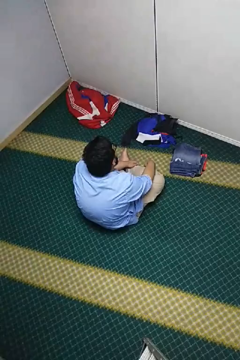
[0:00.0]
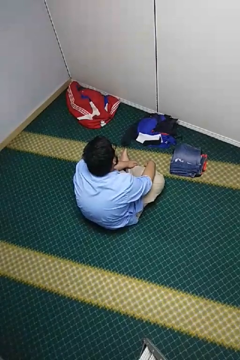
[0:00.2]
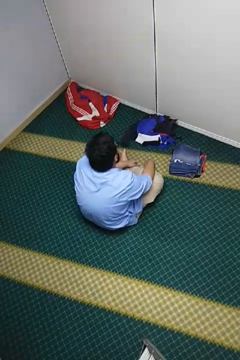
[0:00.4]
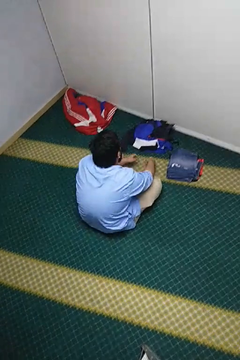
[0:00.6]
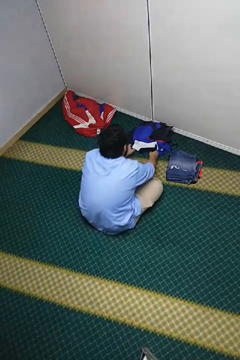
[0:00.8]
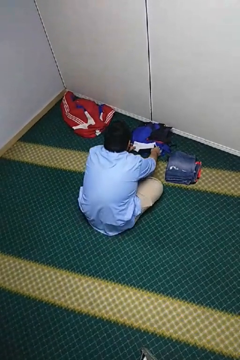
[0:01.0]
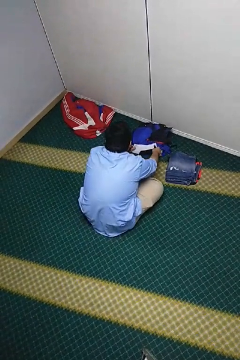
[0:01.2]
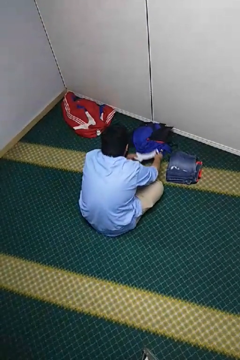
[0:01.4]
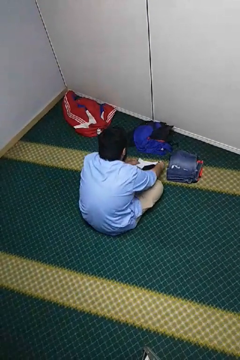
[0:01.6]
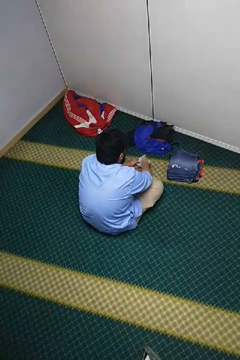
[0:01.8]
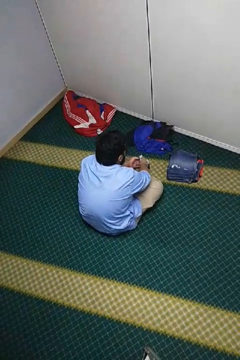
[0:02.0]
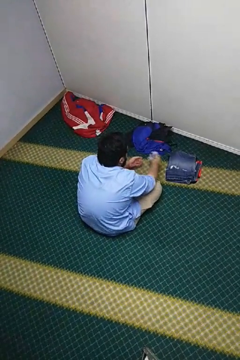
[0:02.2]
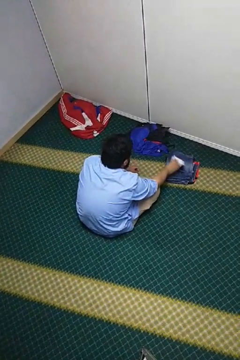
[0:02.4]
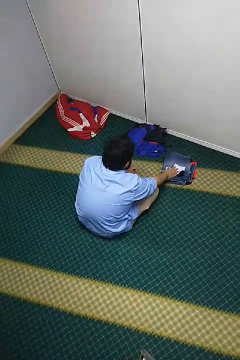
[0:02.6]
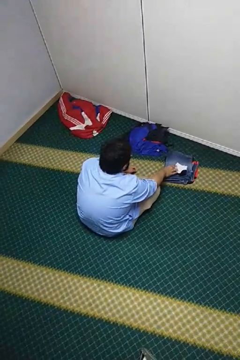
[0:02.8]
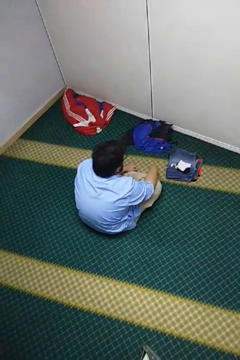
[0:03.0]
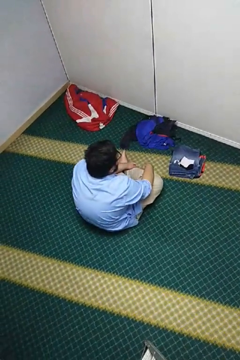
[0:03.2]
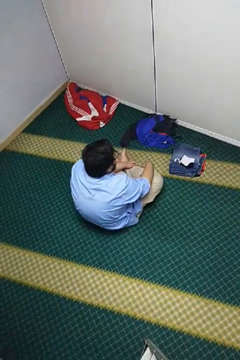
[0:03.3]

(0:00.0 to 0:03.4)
person folds socks

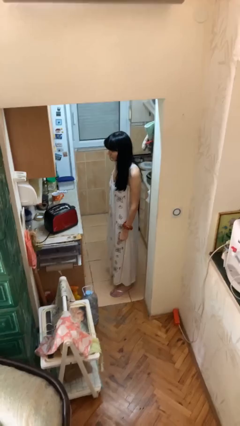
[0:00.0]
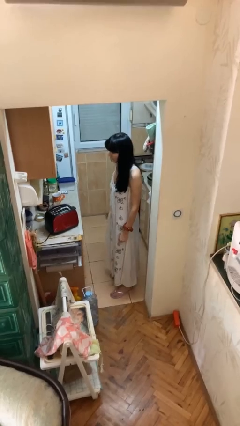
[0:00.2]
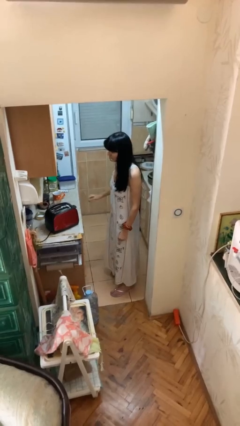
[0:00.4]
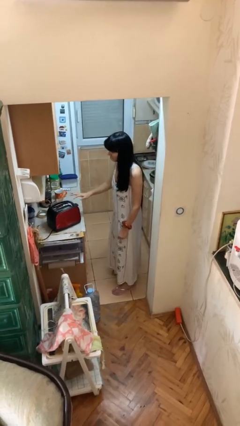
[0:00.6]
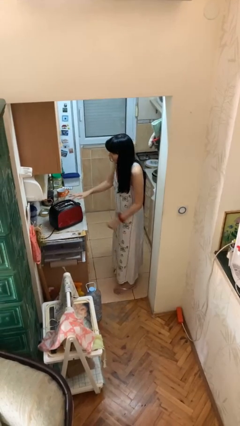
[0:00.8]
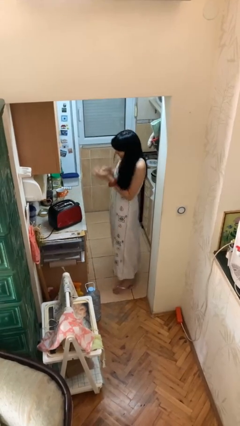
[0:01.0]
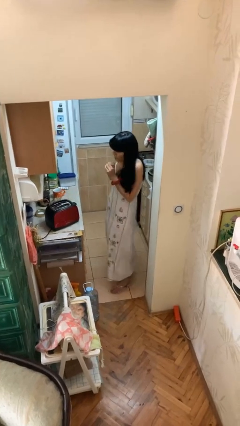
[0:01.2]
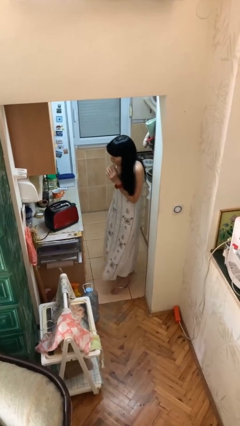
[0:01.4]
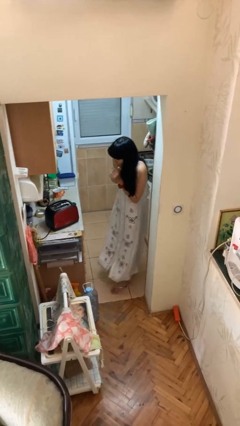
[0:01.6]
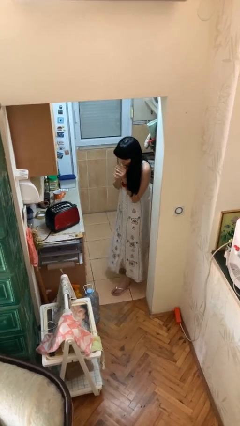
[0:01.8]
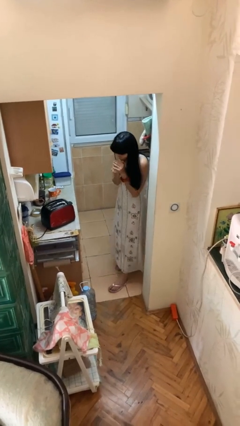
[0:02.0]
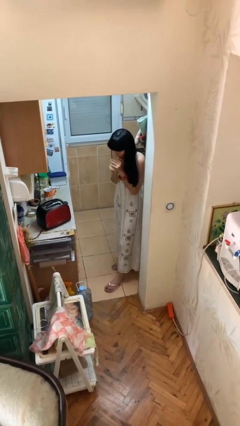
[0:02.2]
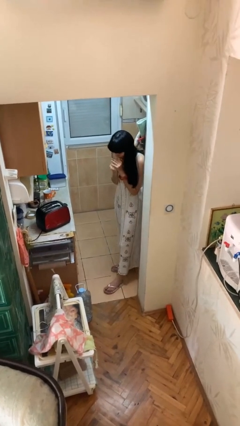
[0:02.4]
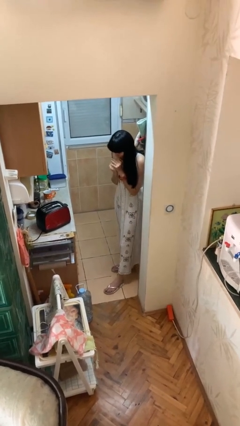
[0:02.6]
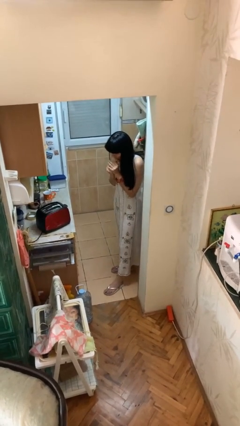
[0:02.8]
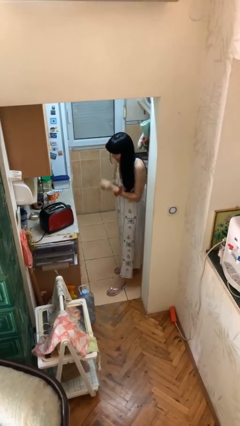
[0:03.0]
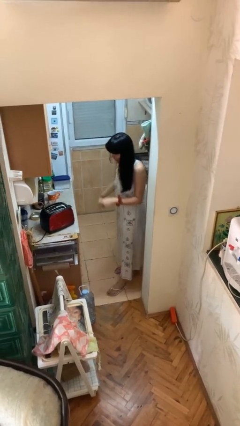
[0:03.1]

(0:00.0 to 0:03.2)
person burns hand

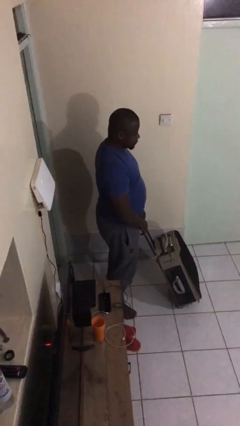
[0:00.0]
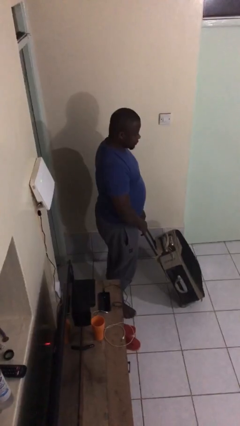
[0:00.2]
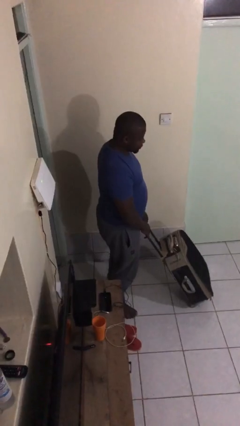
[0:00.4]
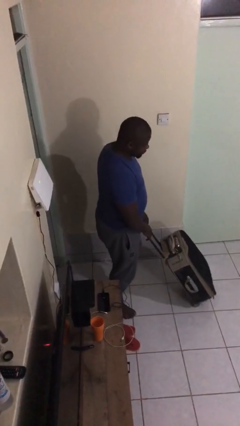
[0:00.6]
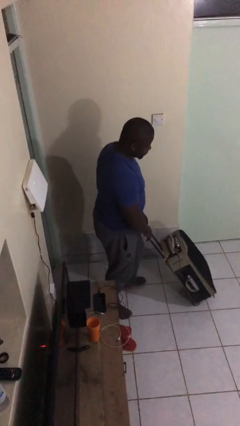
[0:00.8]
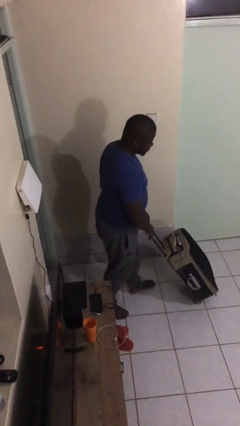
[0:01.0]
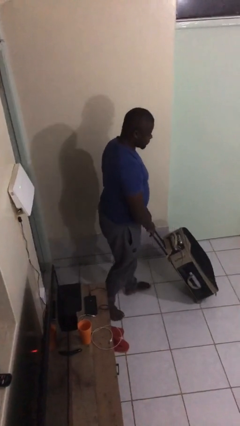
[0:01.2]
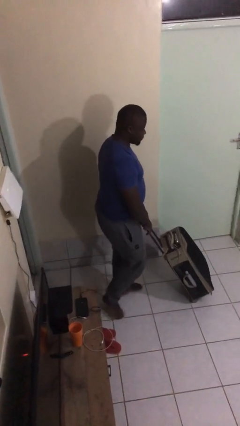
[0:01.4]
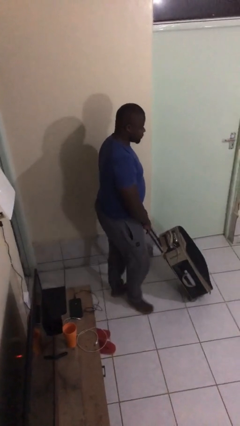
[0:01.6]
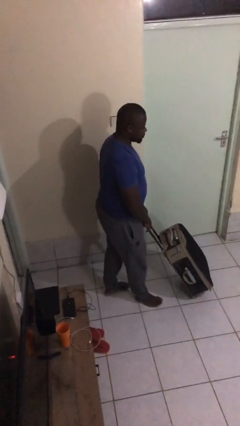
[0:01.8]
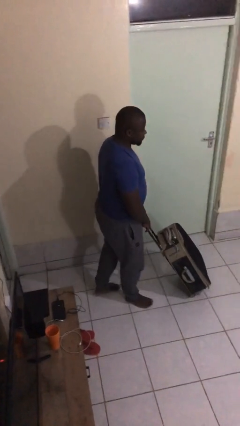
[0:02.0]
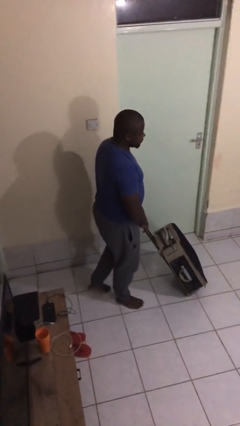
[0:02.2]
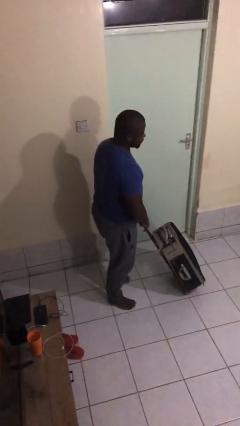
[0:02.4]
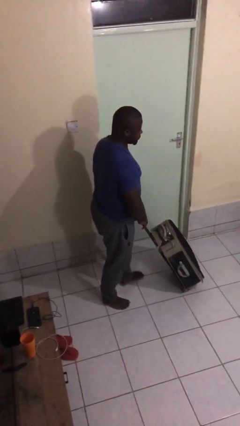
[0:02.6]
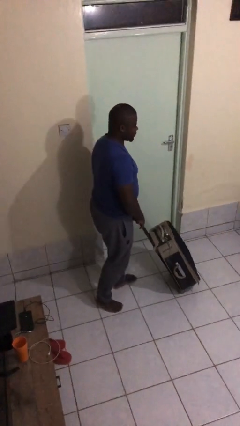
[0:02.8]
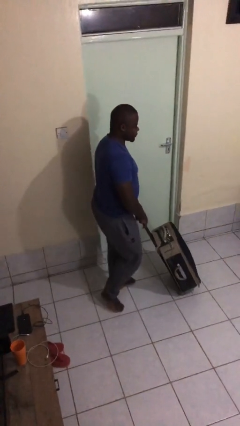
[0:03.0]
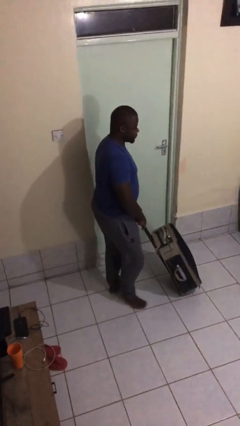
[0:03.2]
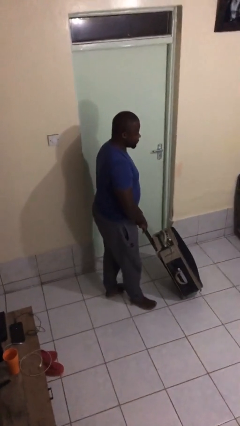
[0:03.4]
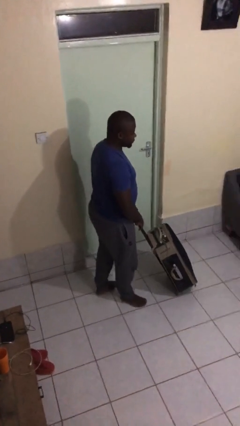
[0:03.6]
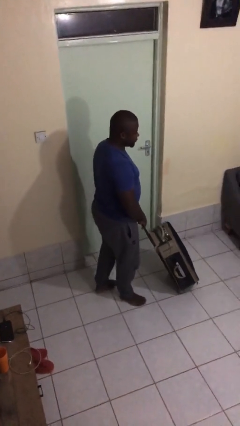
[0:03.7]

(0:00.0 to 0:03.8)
person pushes wheeled cart

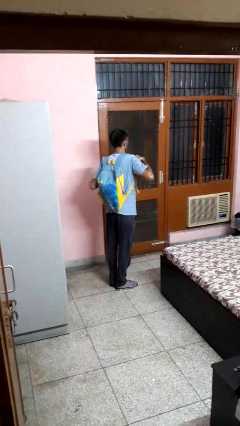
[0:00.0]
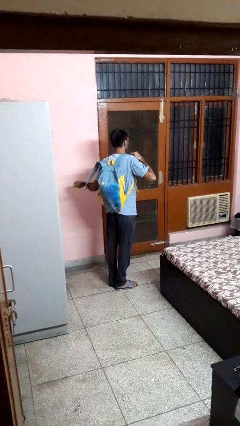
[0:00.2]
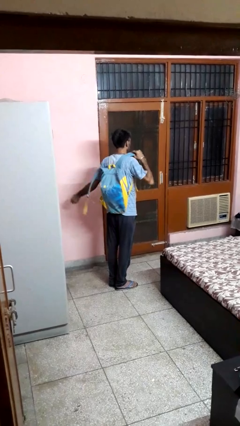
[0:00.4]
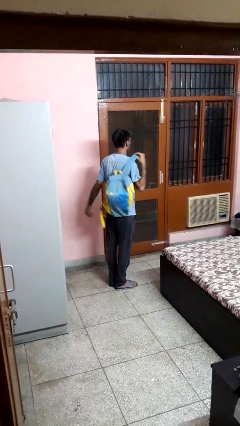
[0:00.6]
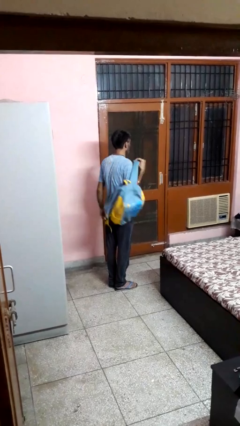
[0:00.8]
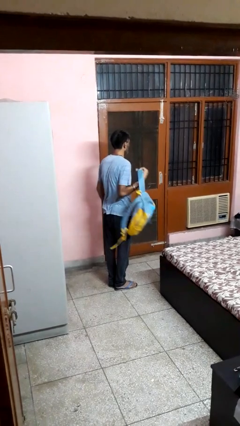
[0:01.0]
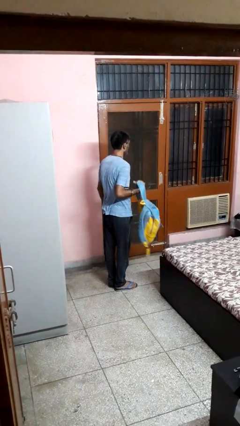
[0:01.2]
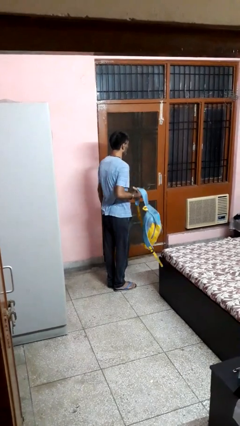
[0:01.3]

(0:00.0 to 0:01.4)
person takes off backpack

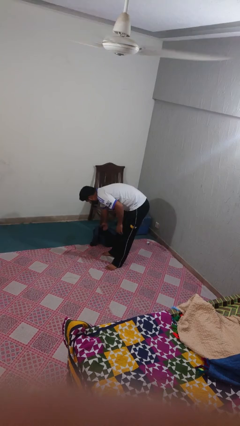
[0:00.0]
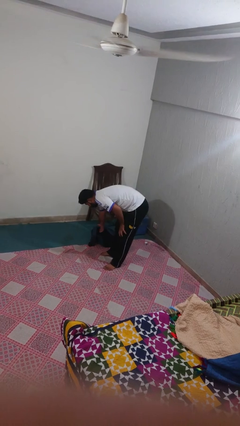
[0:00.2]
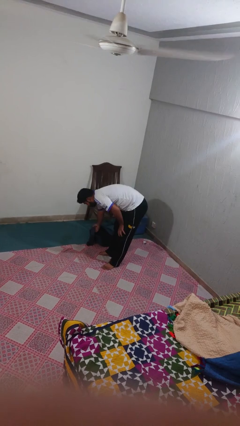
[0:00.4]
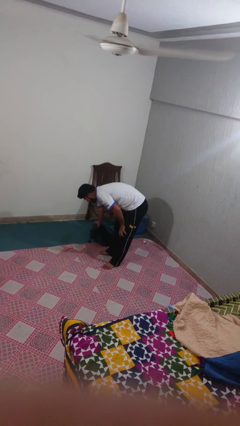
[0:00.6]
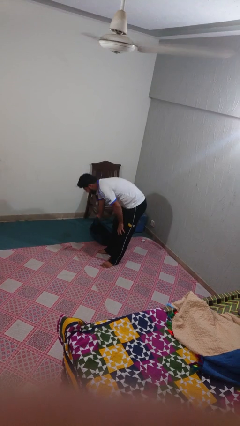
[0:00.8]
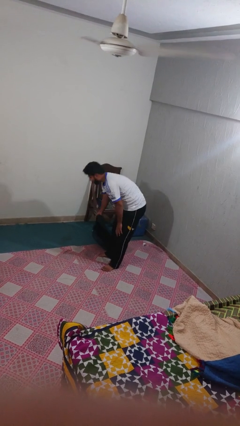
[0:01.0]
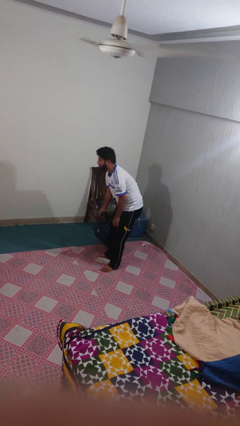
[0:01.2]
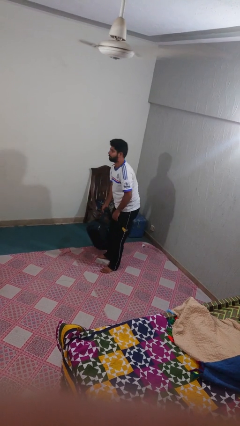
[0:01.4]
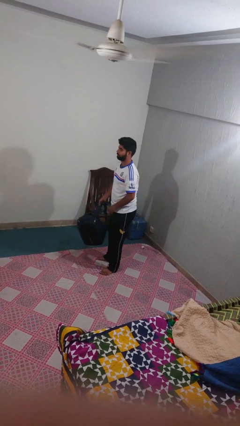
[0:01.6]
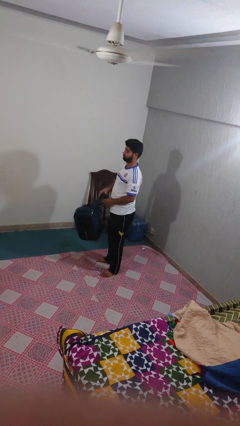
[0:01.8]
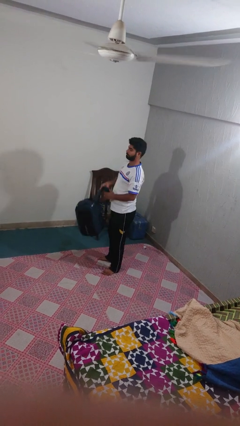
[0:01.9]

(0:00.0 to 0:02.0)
person picks up object from floor

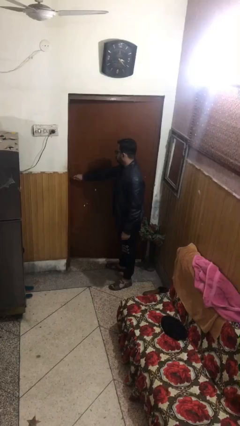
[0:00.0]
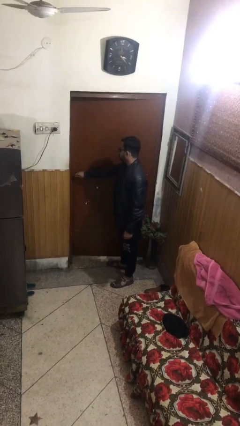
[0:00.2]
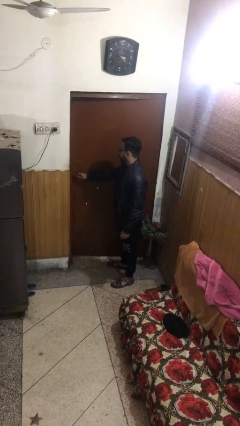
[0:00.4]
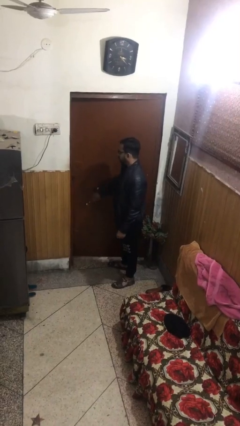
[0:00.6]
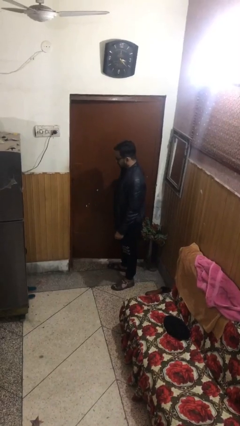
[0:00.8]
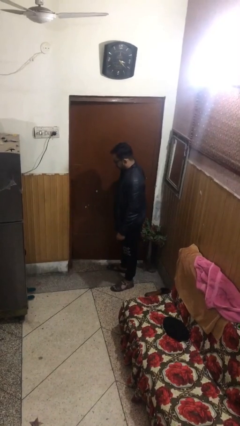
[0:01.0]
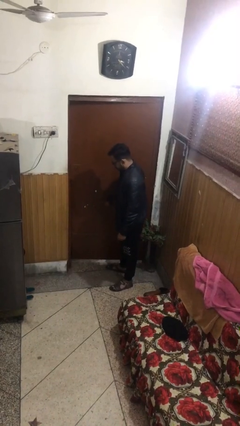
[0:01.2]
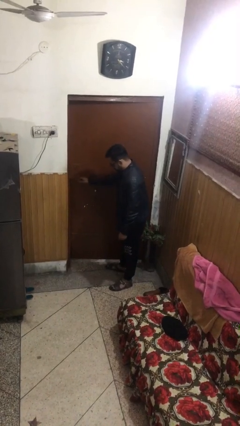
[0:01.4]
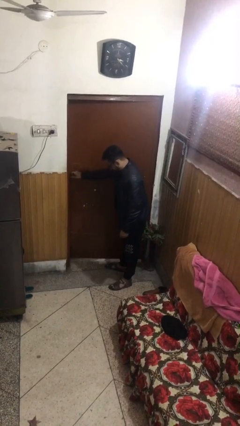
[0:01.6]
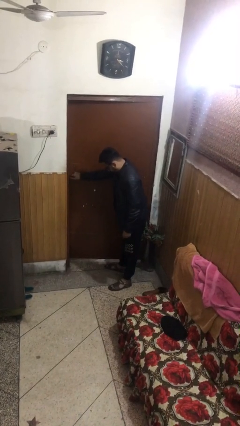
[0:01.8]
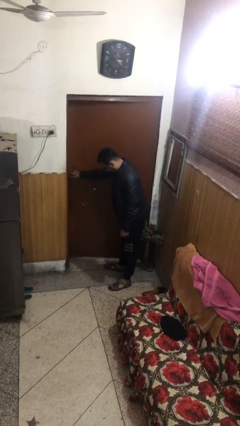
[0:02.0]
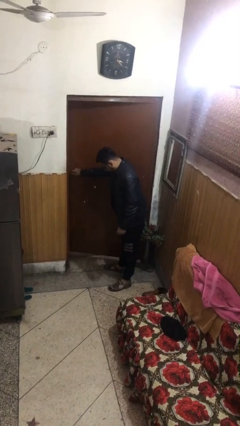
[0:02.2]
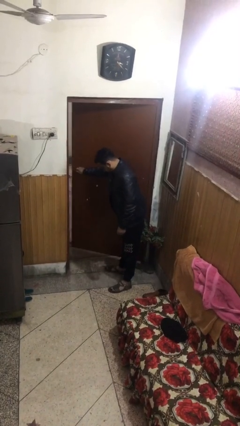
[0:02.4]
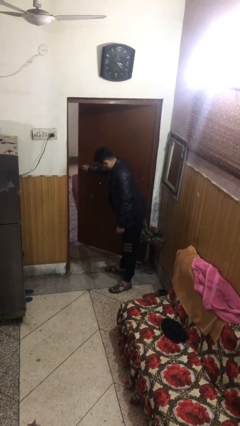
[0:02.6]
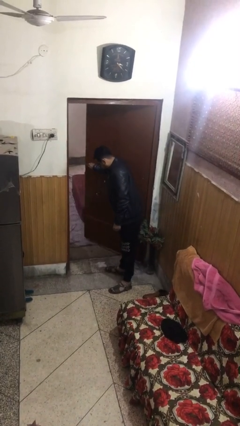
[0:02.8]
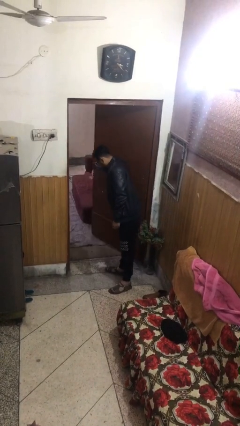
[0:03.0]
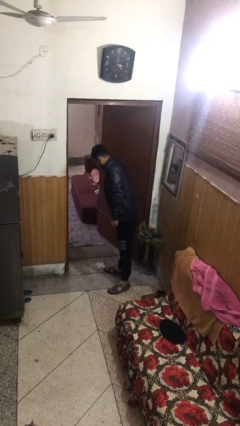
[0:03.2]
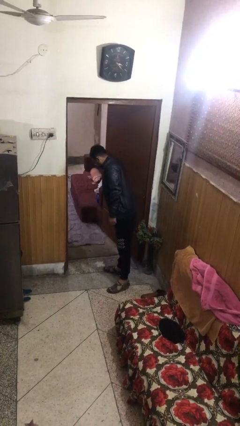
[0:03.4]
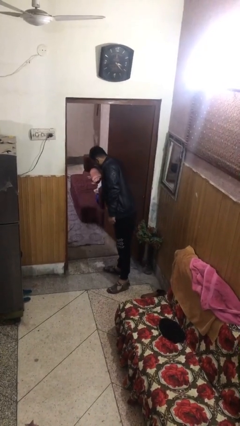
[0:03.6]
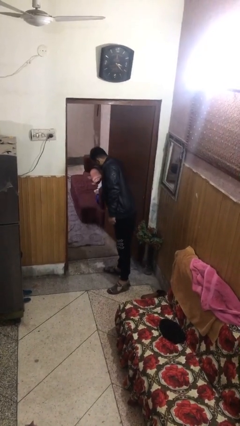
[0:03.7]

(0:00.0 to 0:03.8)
person opens facility door

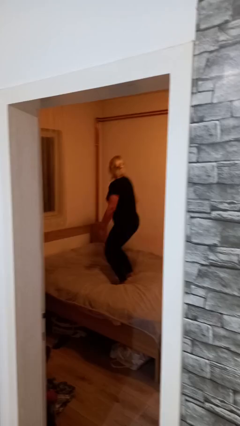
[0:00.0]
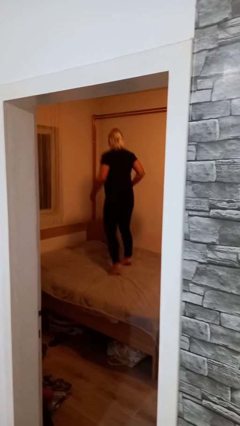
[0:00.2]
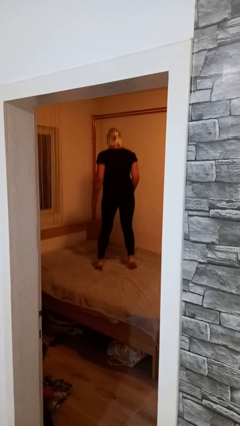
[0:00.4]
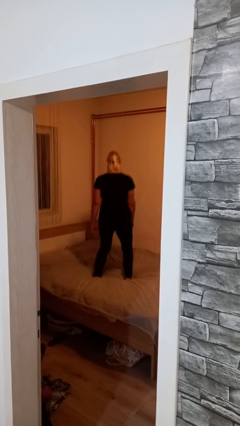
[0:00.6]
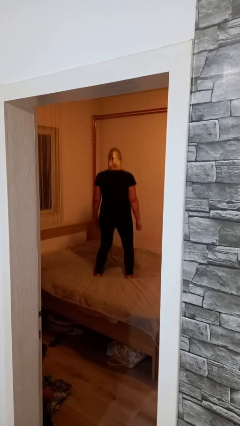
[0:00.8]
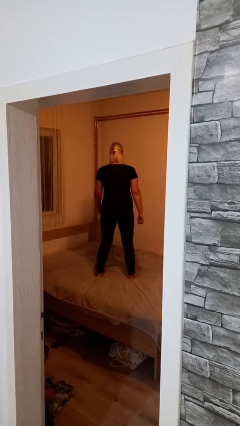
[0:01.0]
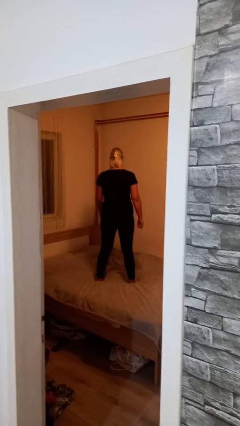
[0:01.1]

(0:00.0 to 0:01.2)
person jumps on bed
